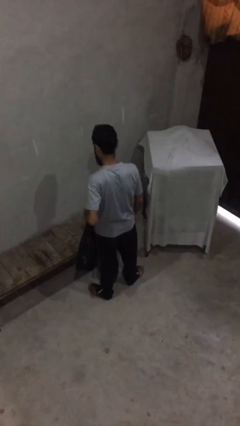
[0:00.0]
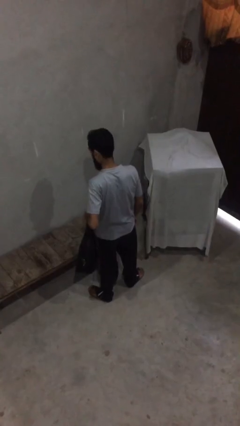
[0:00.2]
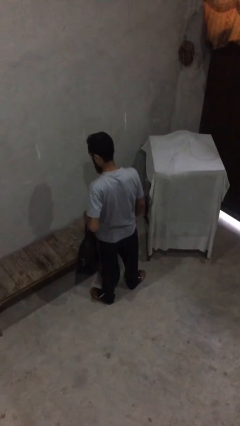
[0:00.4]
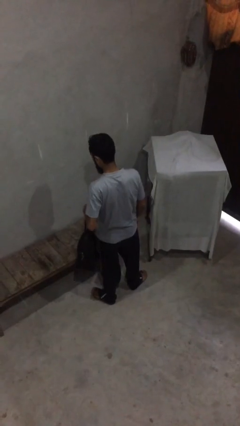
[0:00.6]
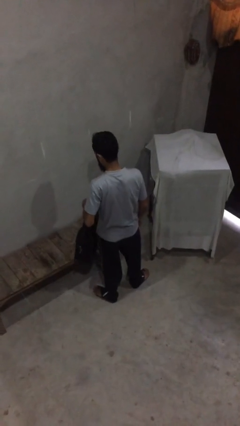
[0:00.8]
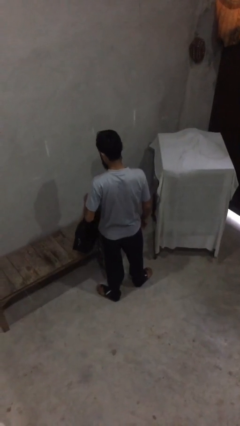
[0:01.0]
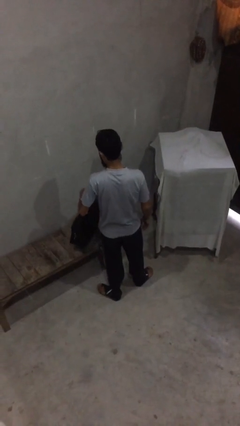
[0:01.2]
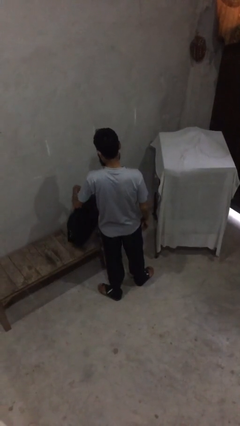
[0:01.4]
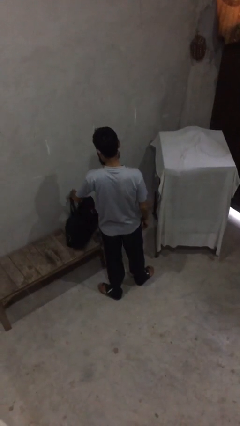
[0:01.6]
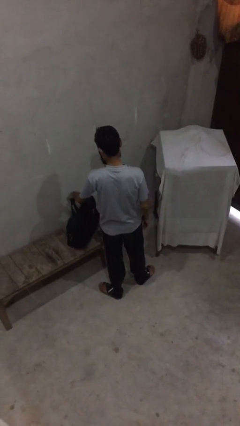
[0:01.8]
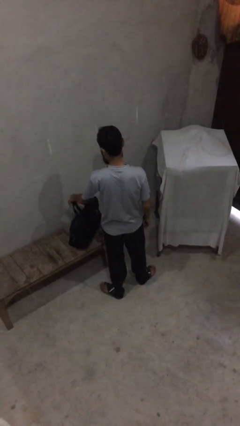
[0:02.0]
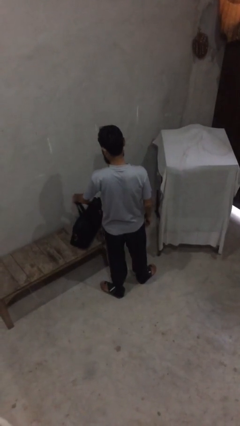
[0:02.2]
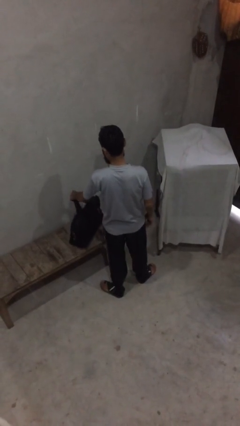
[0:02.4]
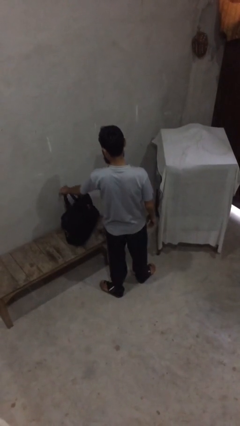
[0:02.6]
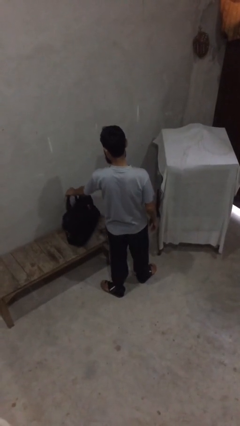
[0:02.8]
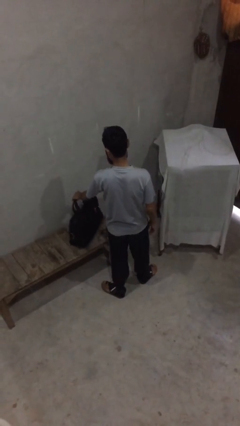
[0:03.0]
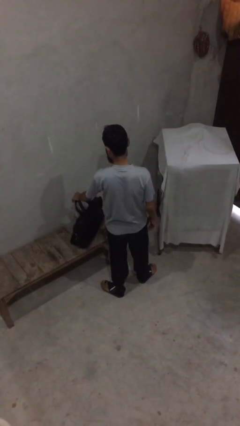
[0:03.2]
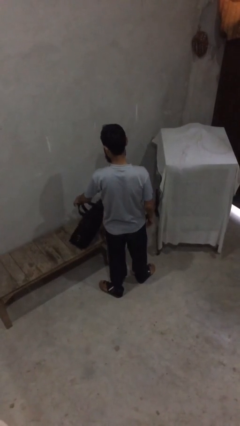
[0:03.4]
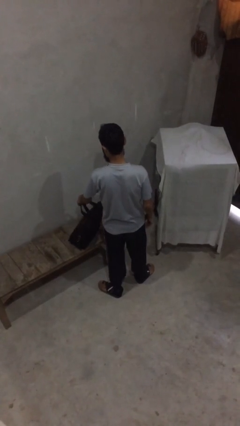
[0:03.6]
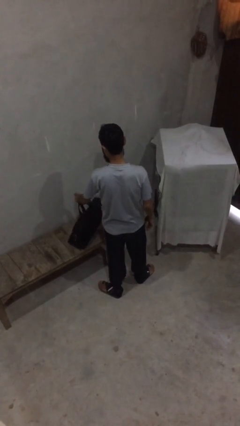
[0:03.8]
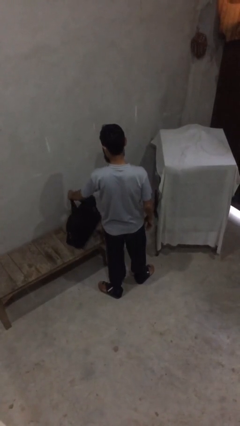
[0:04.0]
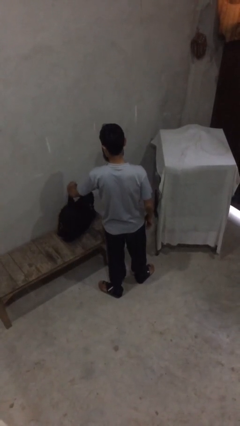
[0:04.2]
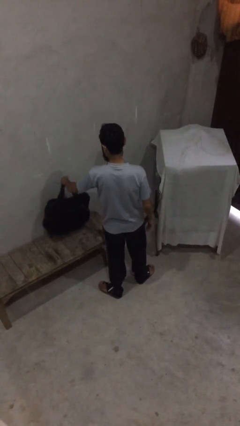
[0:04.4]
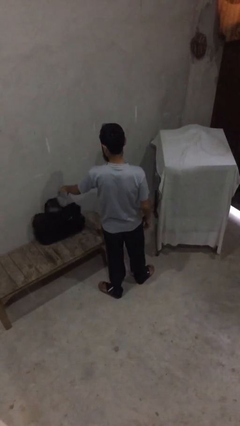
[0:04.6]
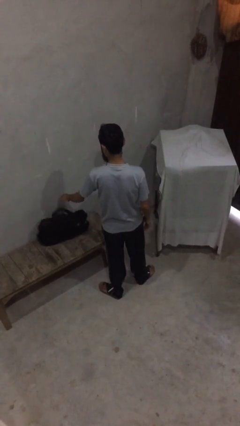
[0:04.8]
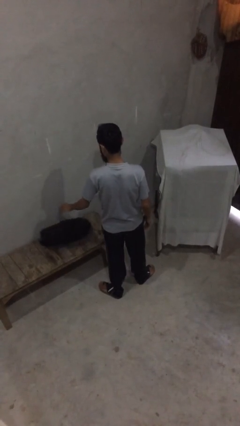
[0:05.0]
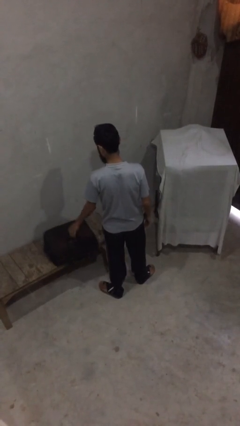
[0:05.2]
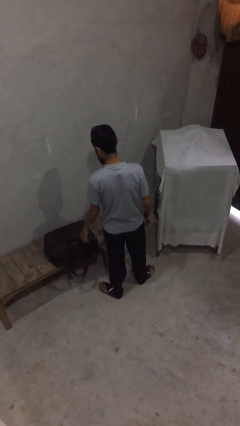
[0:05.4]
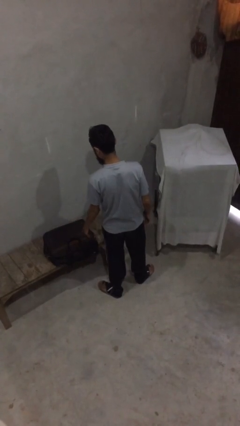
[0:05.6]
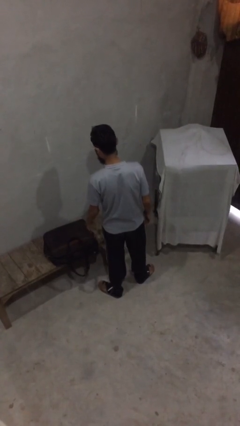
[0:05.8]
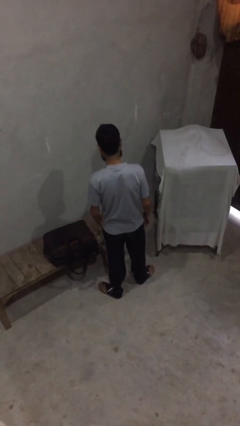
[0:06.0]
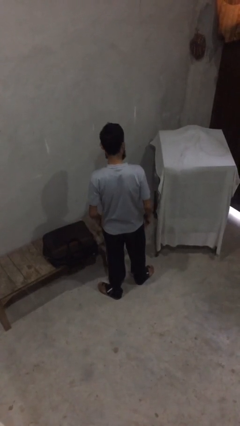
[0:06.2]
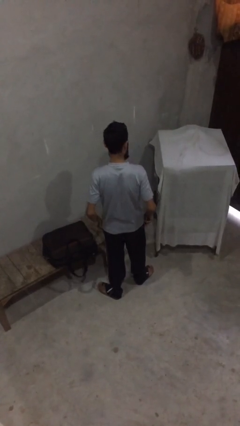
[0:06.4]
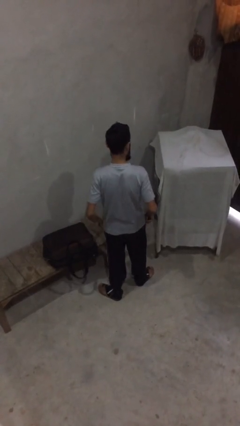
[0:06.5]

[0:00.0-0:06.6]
person puts down object on table

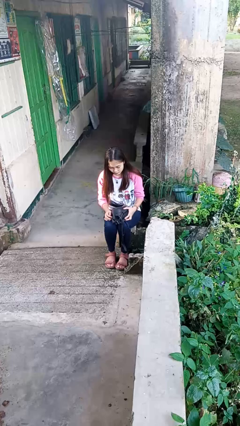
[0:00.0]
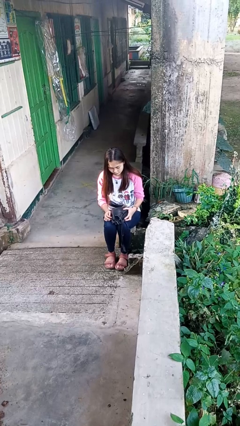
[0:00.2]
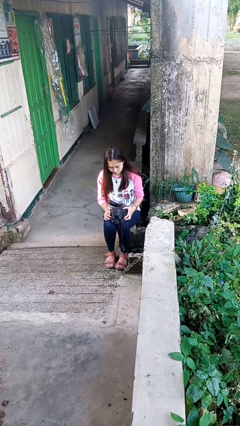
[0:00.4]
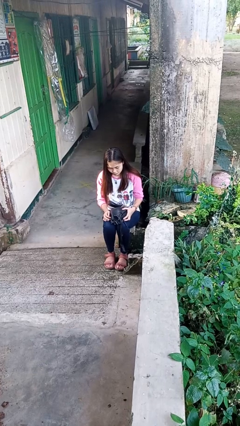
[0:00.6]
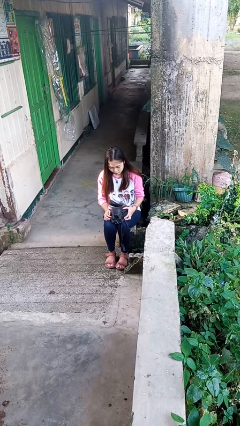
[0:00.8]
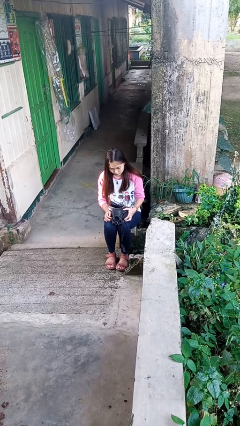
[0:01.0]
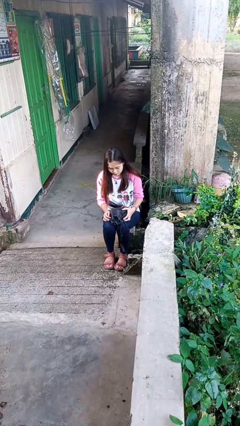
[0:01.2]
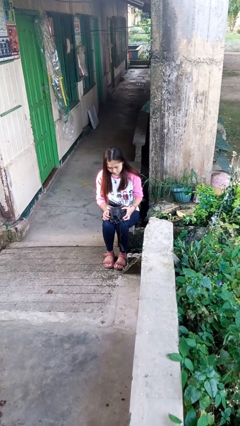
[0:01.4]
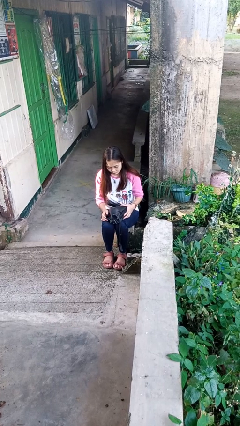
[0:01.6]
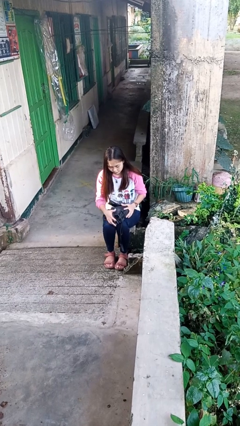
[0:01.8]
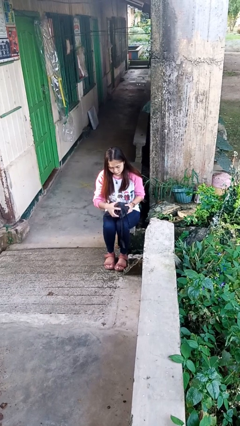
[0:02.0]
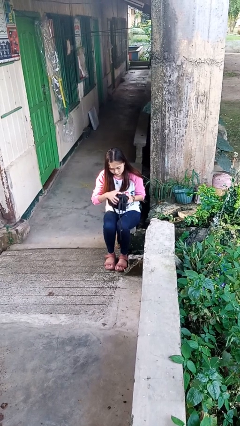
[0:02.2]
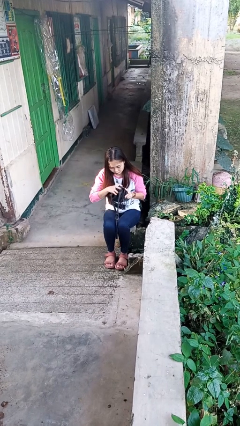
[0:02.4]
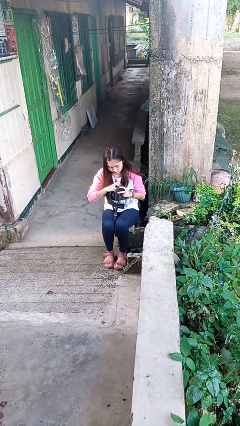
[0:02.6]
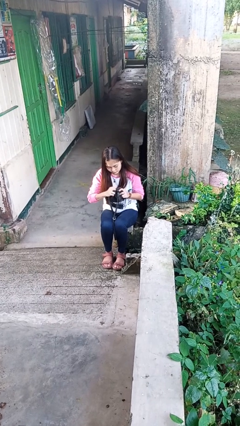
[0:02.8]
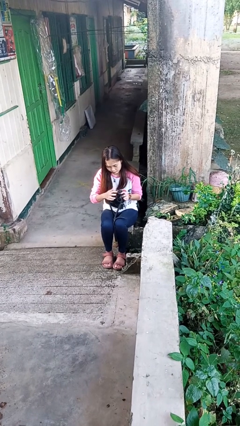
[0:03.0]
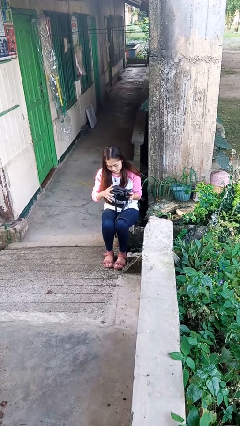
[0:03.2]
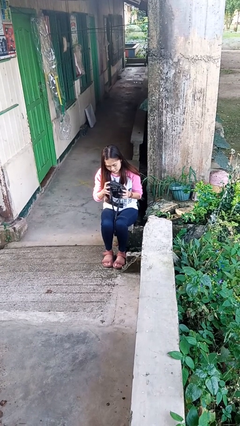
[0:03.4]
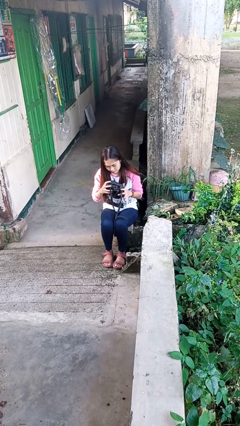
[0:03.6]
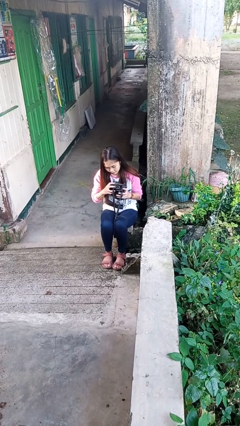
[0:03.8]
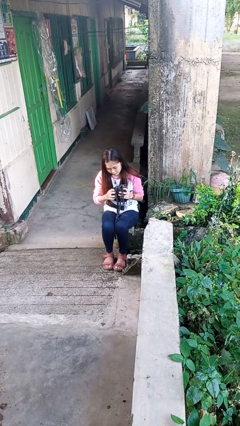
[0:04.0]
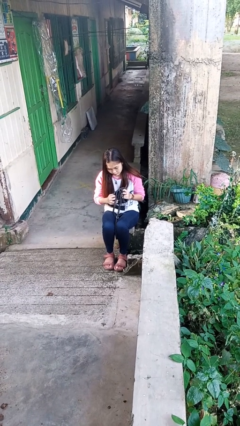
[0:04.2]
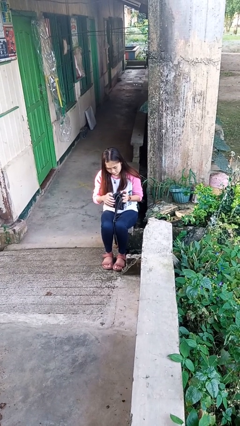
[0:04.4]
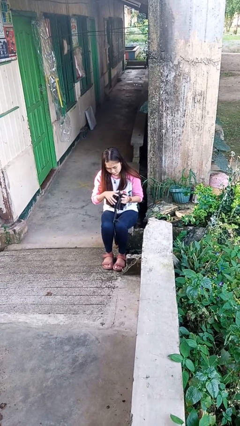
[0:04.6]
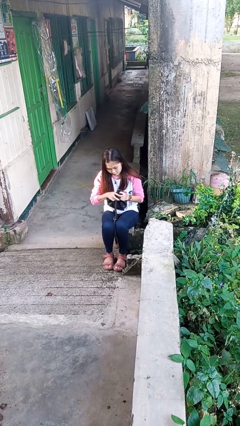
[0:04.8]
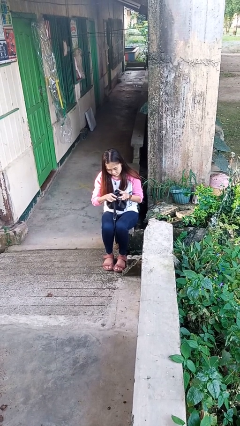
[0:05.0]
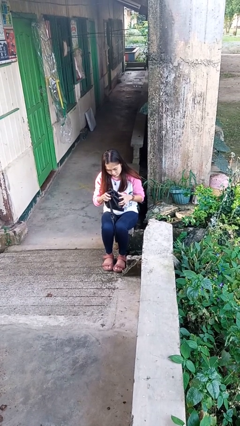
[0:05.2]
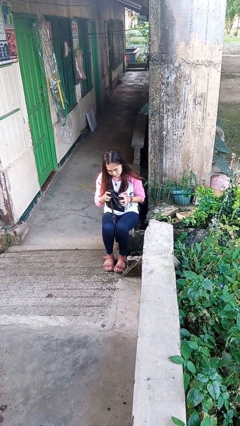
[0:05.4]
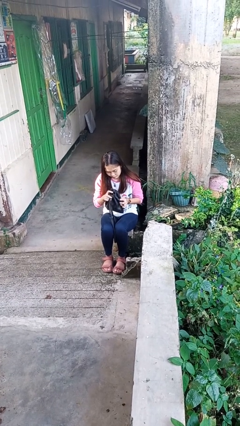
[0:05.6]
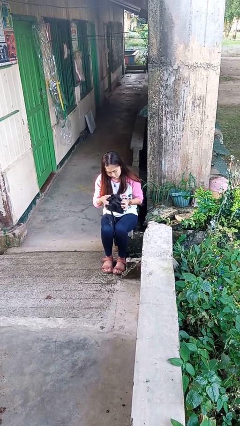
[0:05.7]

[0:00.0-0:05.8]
person squeezes object

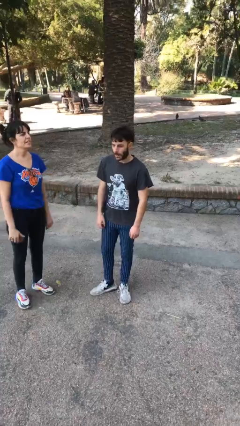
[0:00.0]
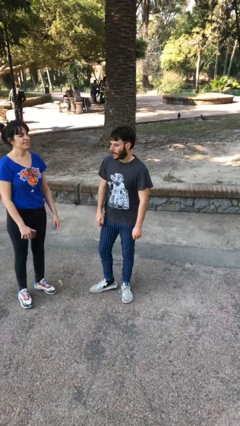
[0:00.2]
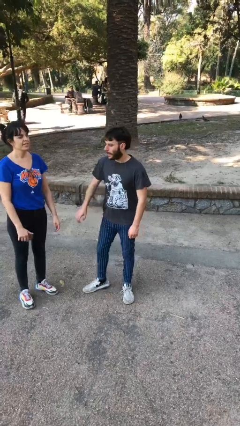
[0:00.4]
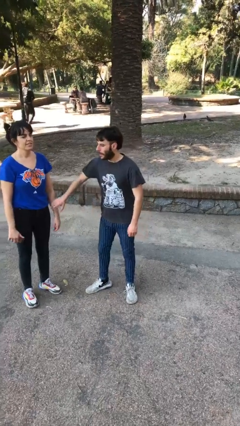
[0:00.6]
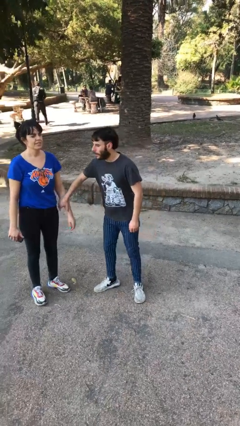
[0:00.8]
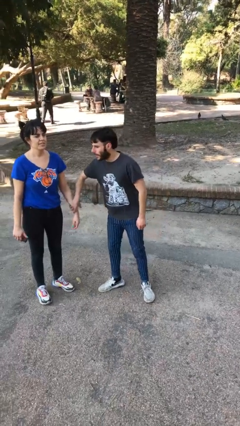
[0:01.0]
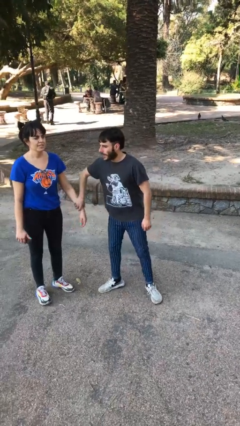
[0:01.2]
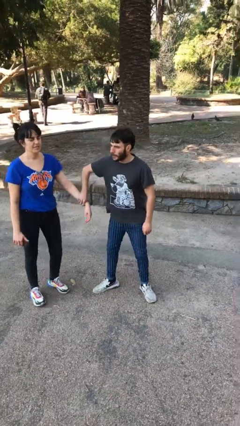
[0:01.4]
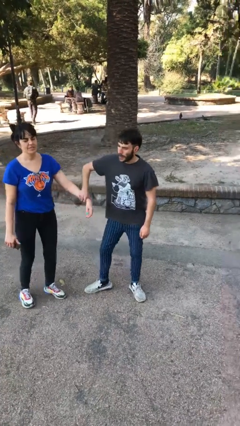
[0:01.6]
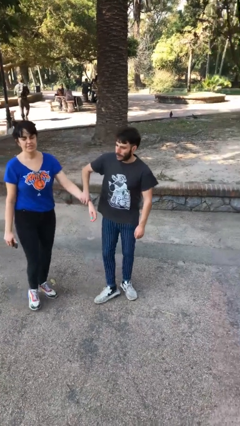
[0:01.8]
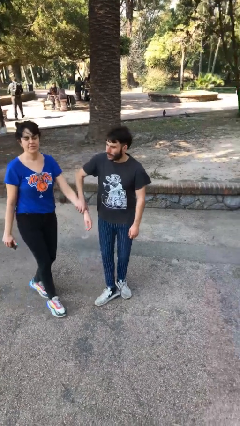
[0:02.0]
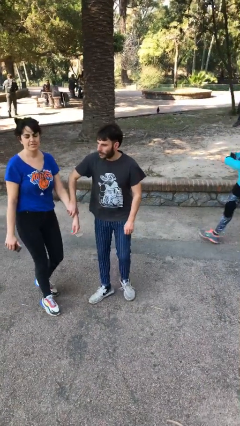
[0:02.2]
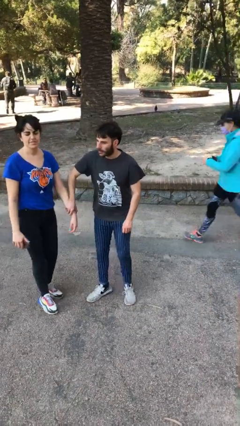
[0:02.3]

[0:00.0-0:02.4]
person grabs person by forearm

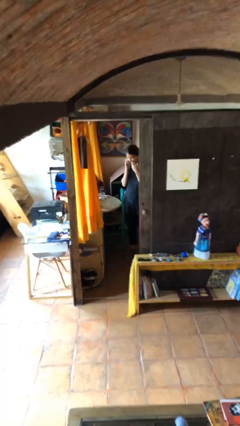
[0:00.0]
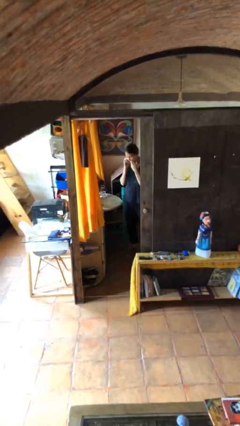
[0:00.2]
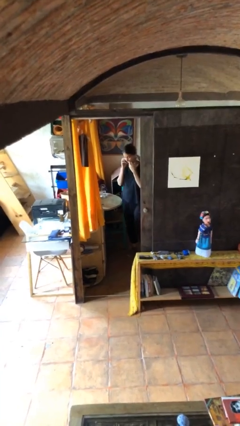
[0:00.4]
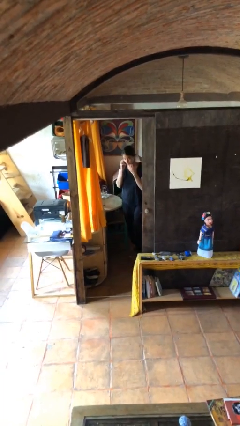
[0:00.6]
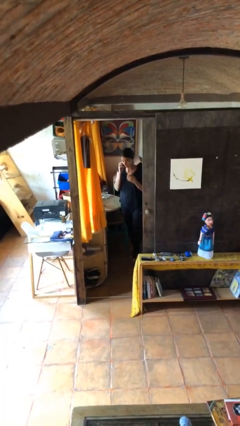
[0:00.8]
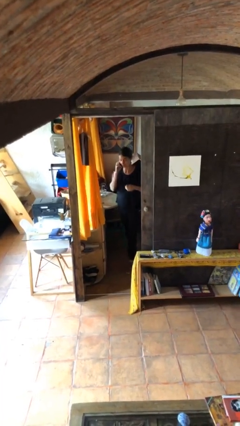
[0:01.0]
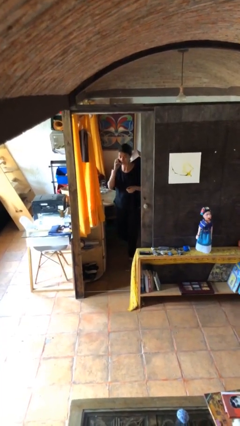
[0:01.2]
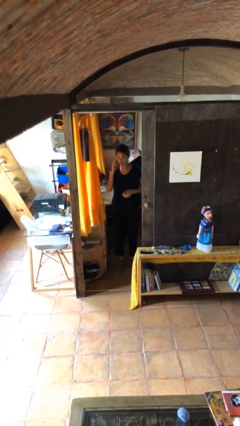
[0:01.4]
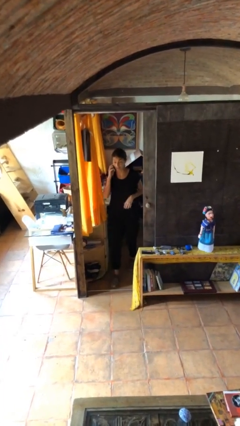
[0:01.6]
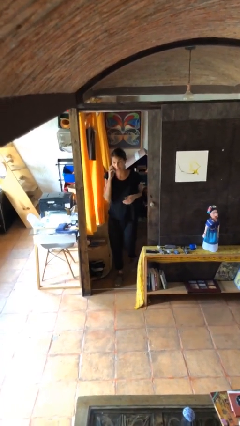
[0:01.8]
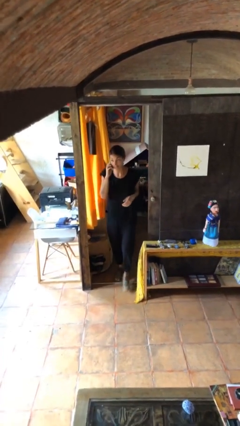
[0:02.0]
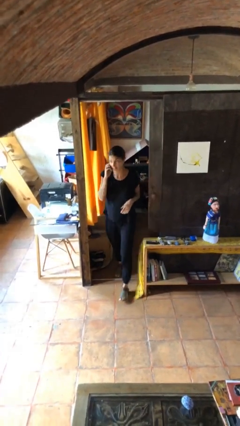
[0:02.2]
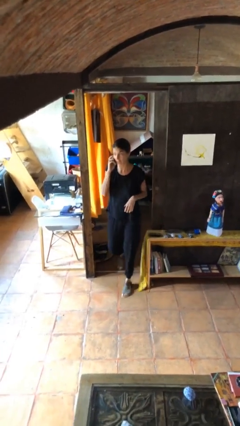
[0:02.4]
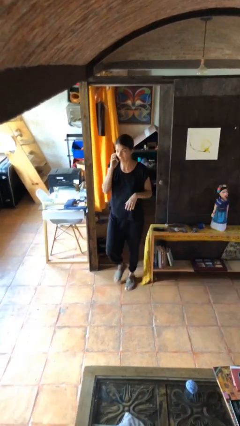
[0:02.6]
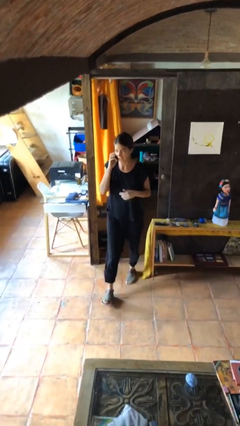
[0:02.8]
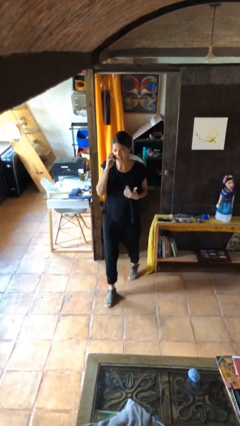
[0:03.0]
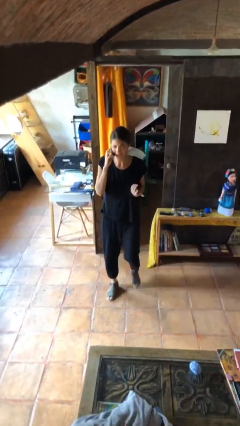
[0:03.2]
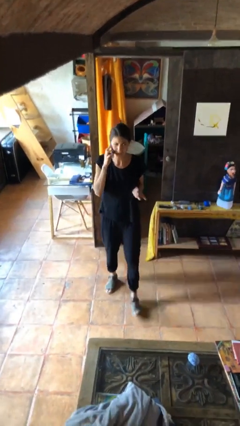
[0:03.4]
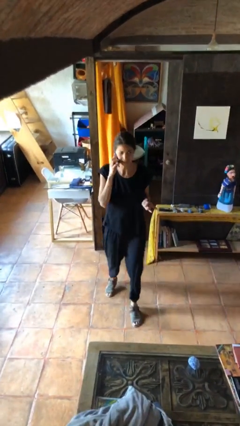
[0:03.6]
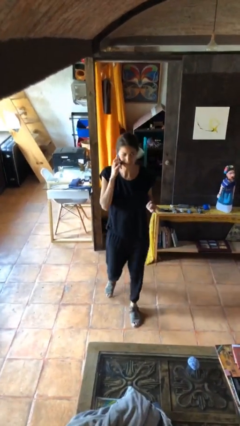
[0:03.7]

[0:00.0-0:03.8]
person enters scene through structure
